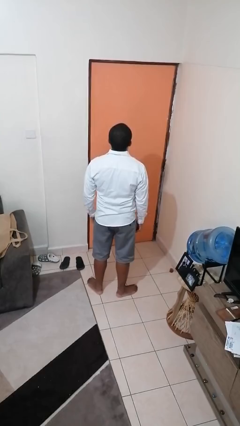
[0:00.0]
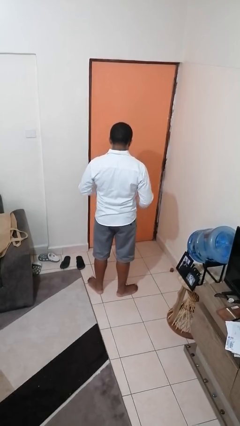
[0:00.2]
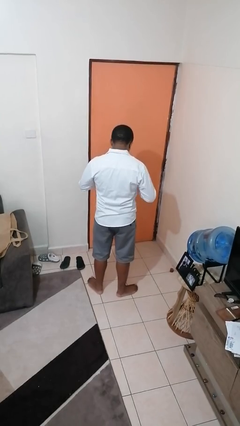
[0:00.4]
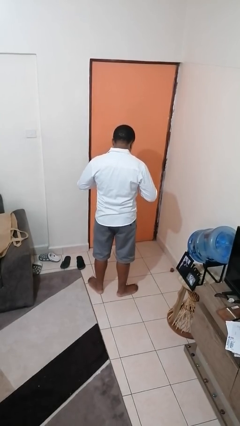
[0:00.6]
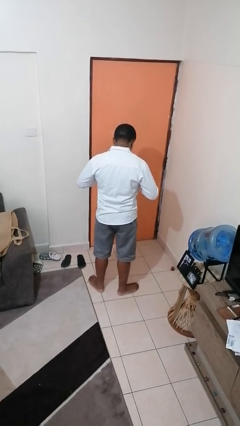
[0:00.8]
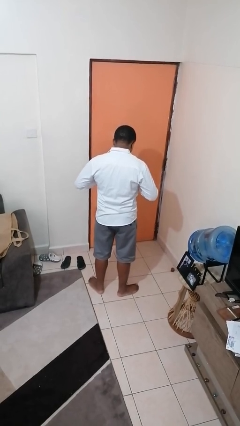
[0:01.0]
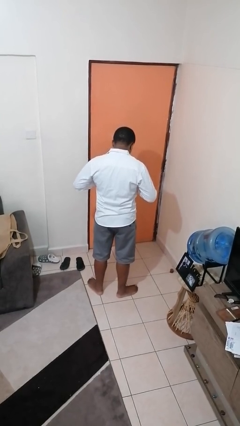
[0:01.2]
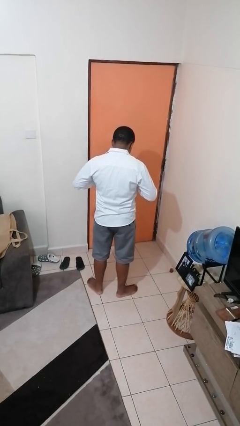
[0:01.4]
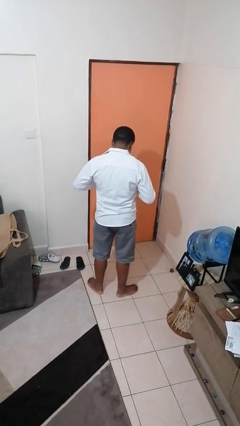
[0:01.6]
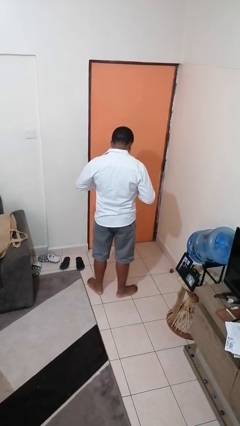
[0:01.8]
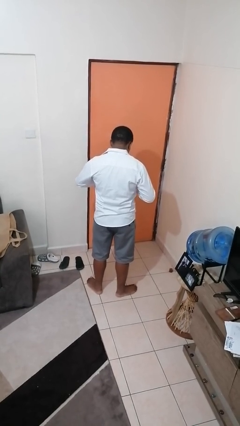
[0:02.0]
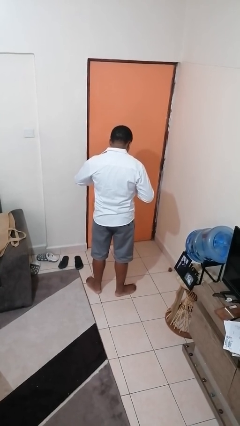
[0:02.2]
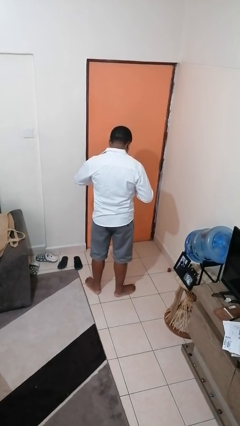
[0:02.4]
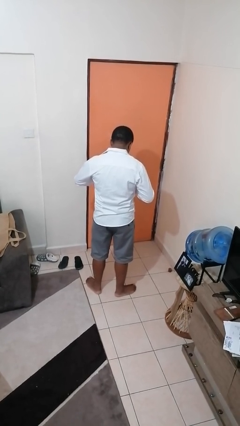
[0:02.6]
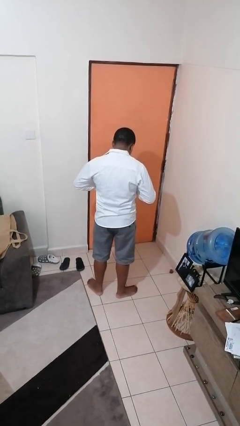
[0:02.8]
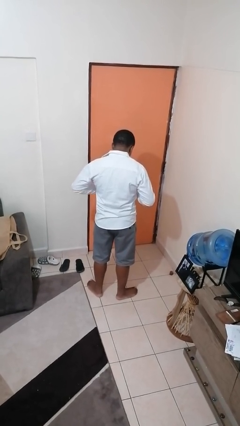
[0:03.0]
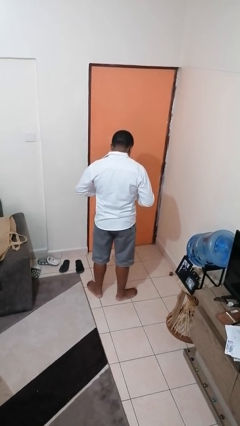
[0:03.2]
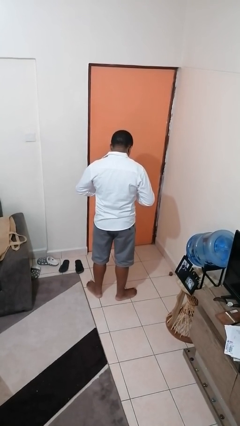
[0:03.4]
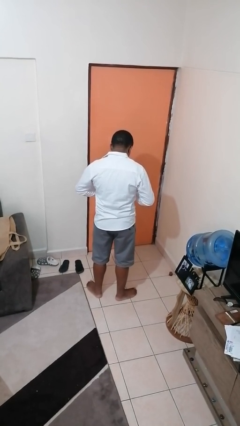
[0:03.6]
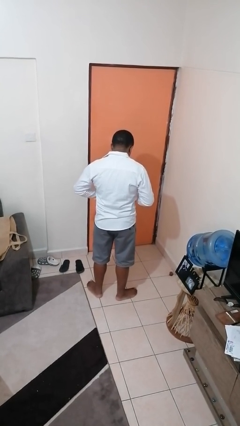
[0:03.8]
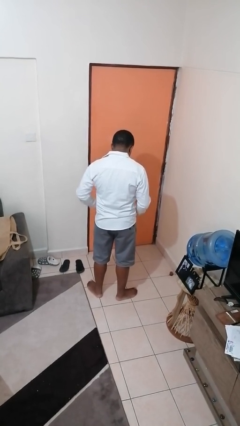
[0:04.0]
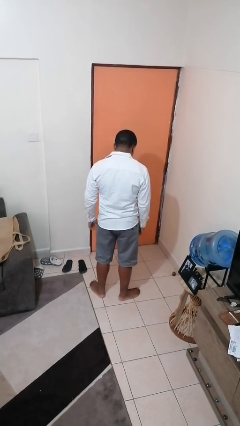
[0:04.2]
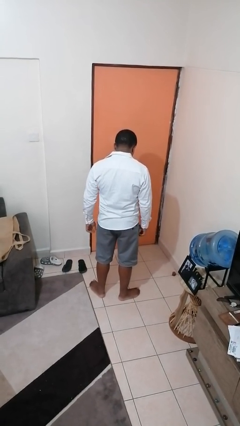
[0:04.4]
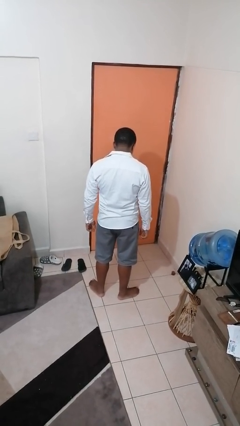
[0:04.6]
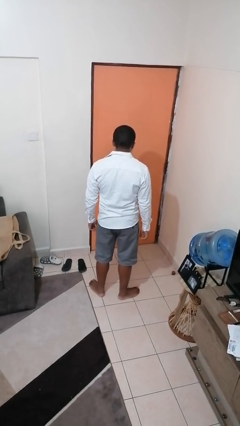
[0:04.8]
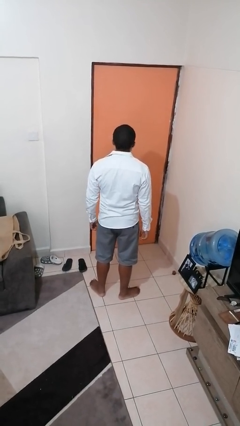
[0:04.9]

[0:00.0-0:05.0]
person unbuttons shirt

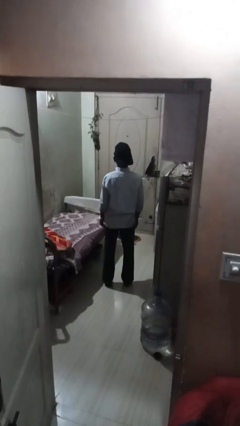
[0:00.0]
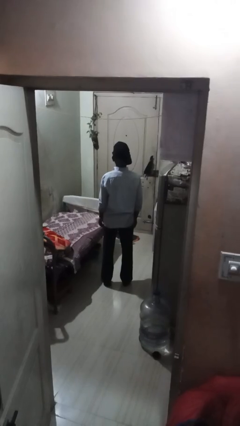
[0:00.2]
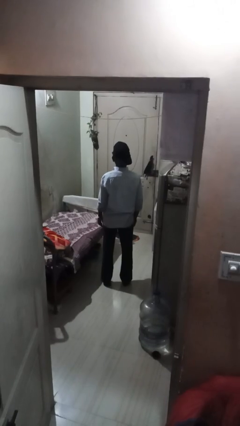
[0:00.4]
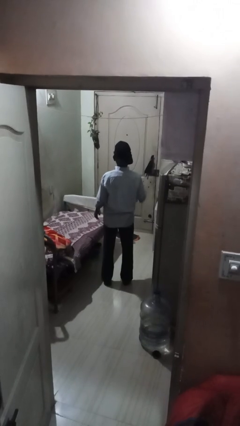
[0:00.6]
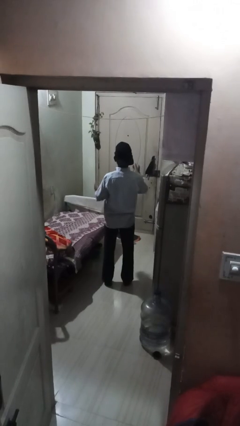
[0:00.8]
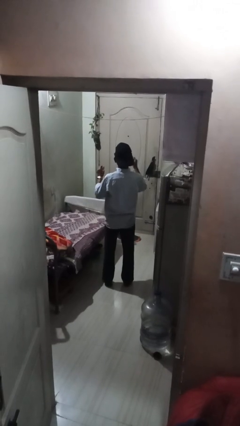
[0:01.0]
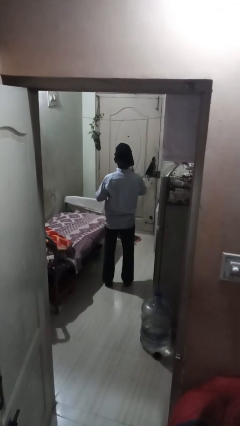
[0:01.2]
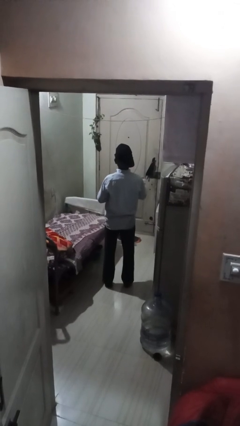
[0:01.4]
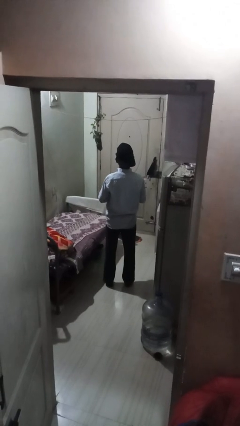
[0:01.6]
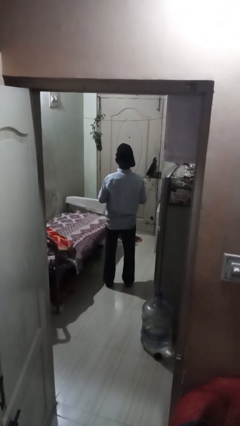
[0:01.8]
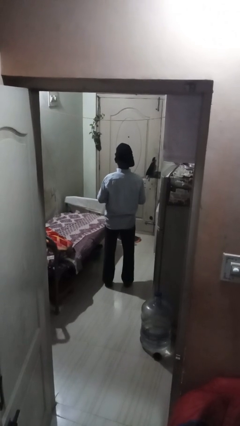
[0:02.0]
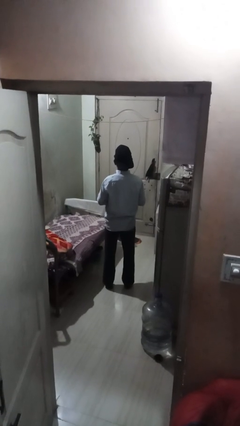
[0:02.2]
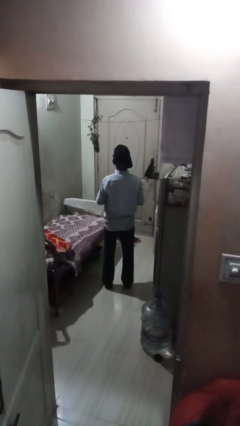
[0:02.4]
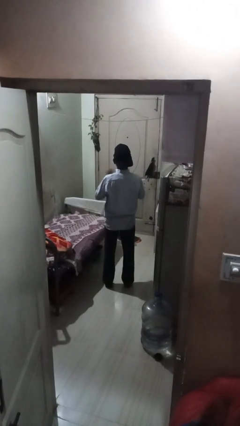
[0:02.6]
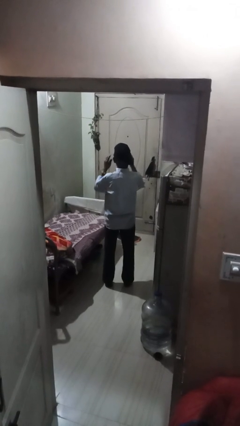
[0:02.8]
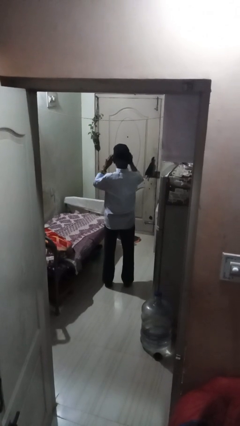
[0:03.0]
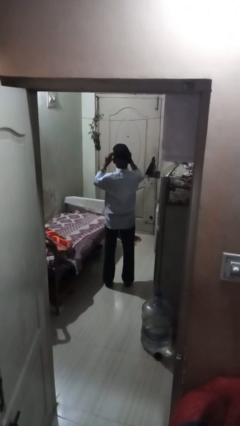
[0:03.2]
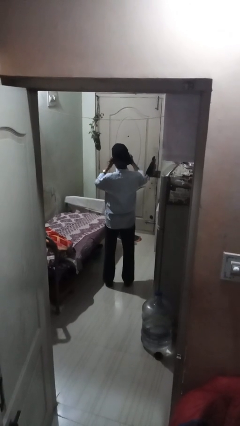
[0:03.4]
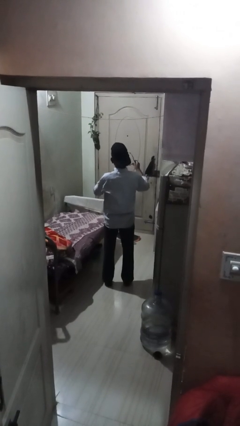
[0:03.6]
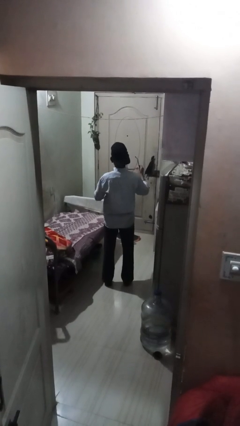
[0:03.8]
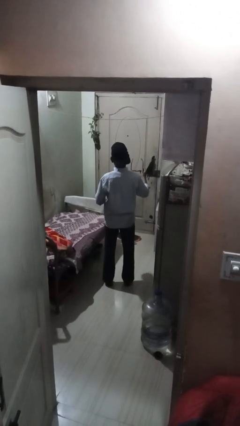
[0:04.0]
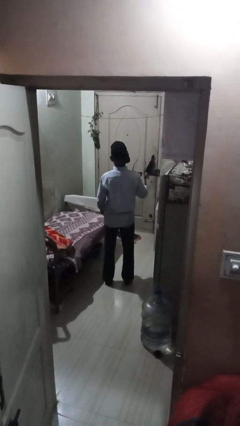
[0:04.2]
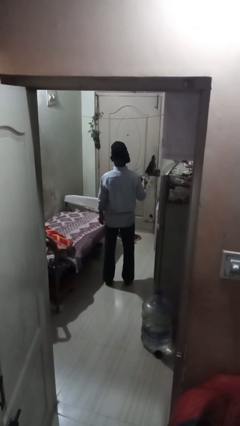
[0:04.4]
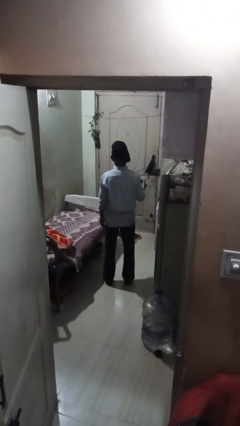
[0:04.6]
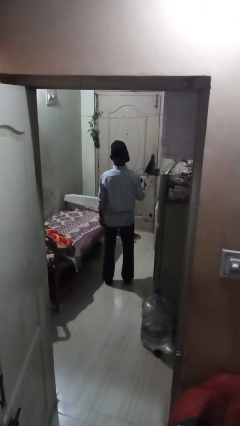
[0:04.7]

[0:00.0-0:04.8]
person takes off sunglasses

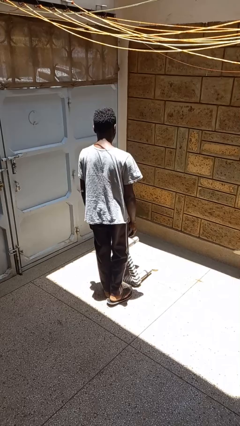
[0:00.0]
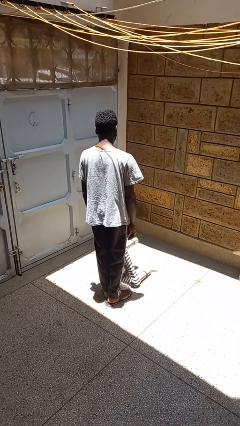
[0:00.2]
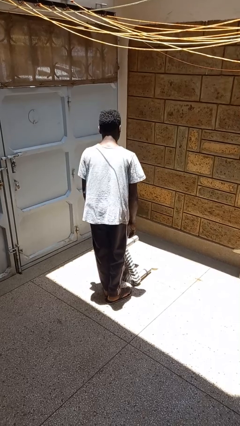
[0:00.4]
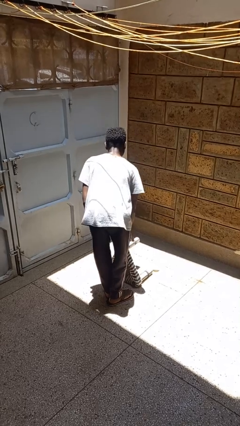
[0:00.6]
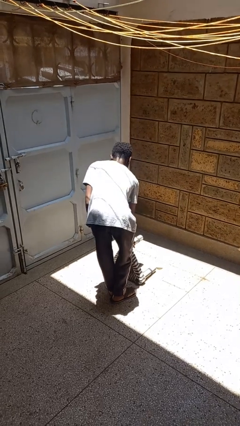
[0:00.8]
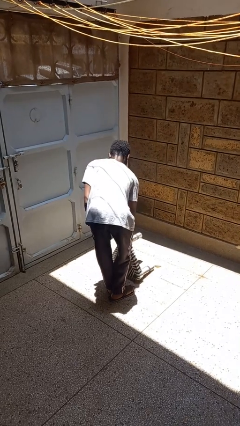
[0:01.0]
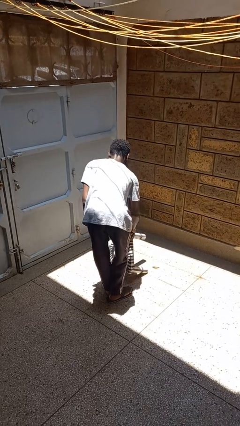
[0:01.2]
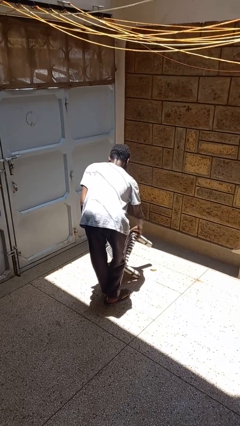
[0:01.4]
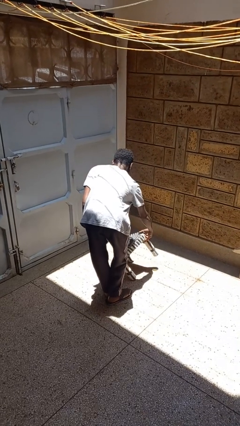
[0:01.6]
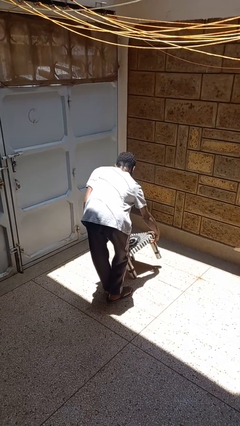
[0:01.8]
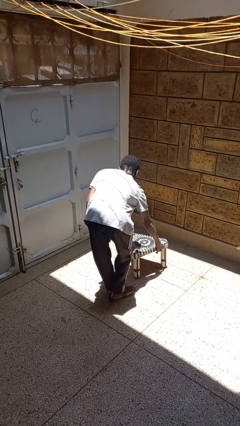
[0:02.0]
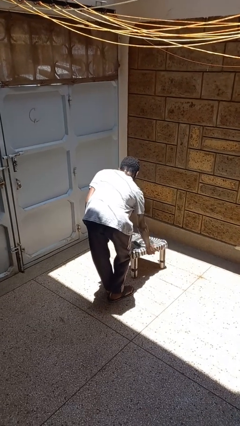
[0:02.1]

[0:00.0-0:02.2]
person sets upright furniture

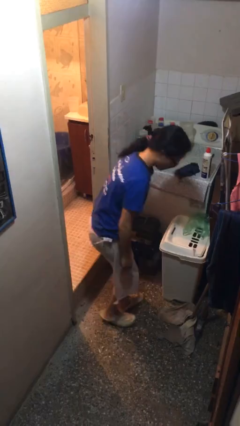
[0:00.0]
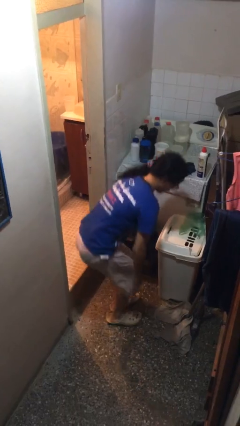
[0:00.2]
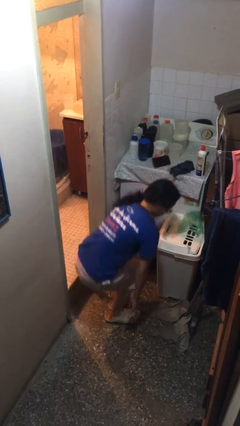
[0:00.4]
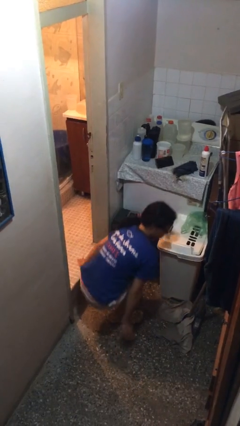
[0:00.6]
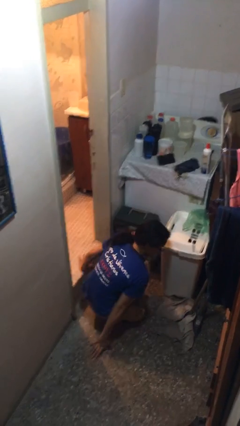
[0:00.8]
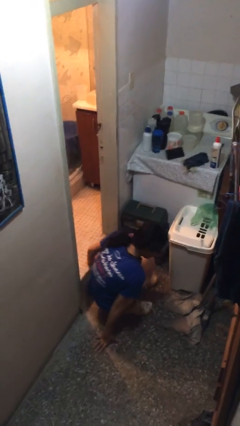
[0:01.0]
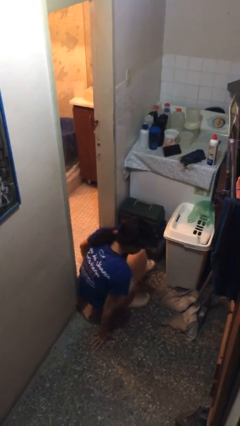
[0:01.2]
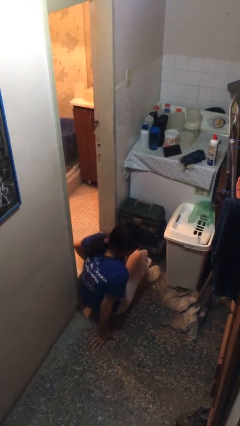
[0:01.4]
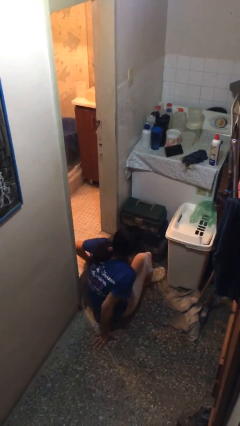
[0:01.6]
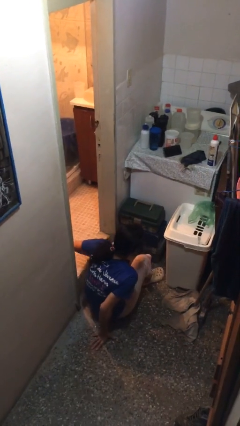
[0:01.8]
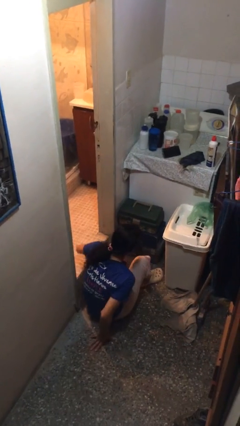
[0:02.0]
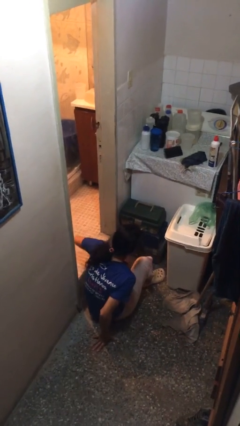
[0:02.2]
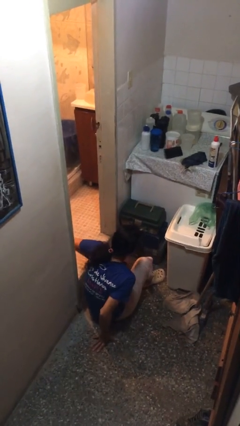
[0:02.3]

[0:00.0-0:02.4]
person sits down

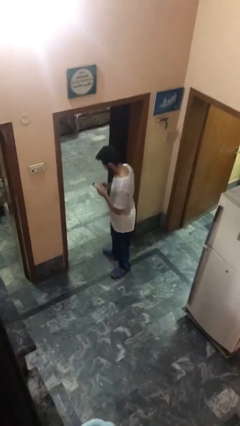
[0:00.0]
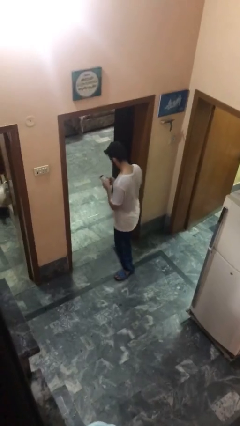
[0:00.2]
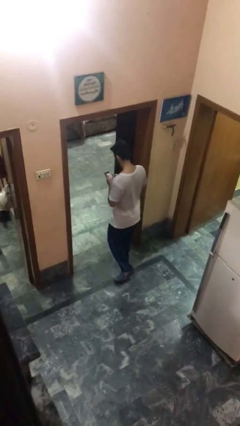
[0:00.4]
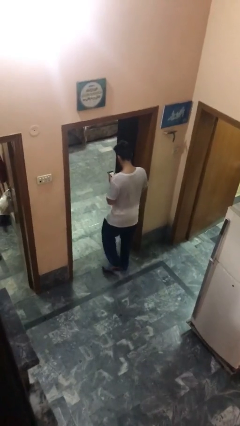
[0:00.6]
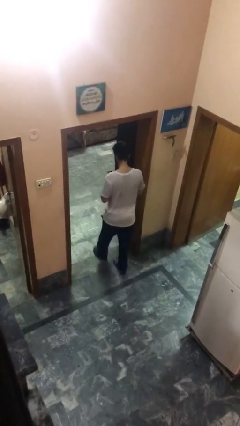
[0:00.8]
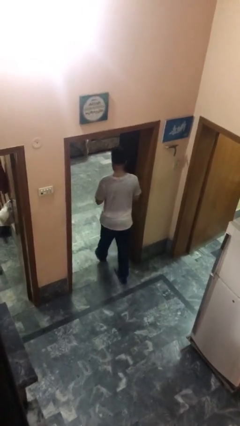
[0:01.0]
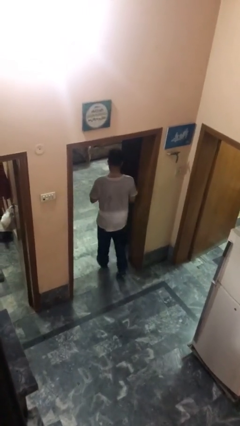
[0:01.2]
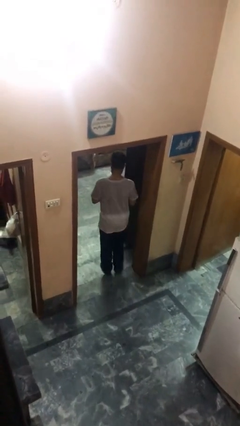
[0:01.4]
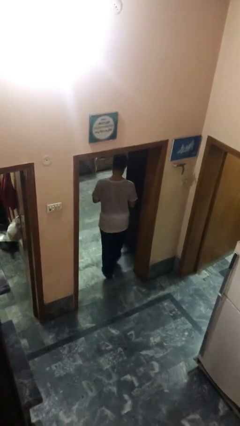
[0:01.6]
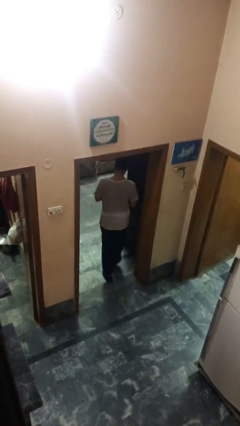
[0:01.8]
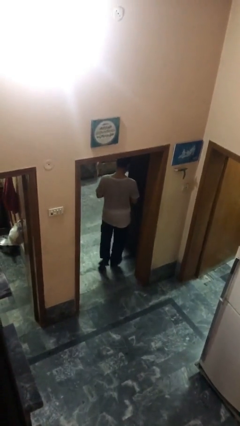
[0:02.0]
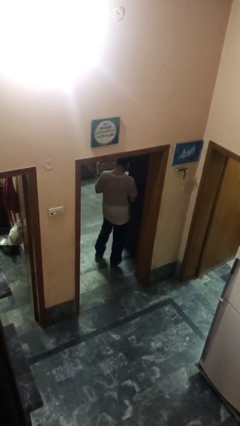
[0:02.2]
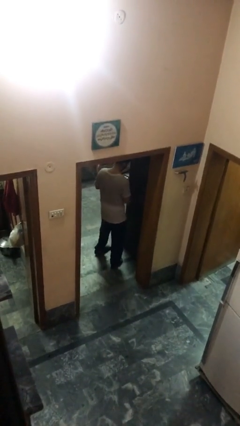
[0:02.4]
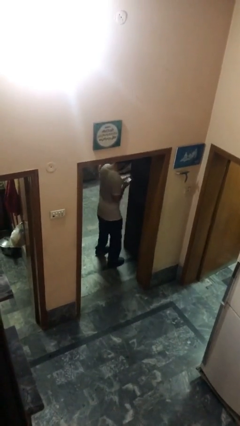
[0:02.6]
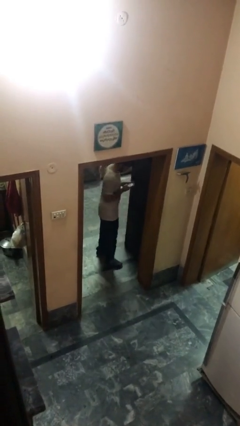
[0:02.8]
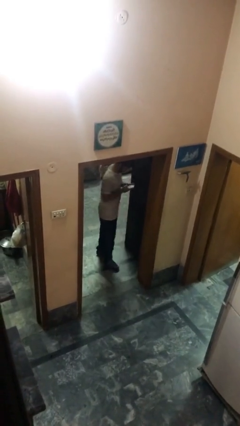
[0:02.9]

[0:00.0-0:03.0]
person exits scene through structure

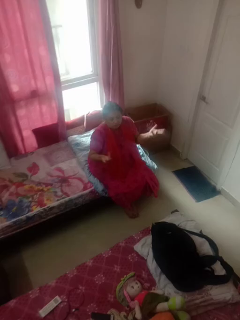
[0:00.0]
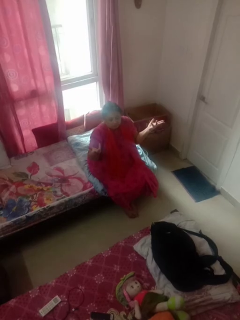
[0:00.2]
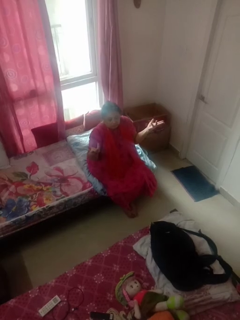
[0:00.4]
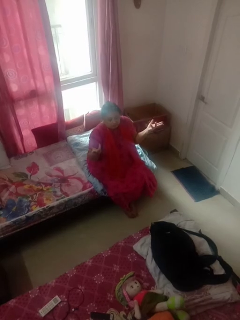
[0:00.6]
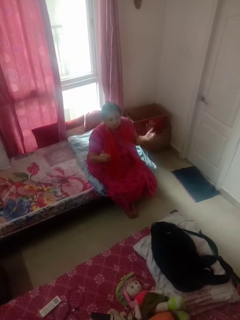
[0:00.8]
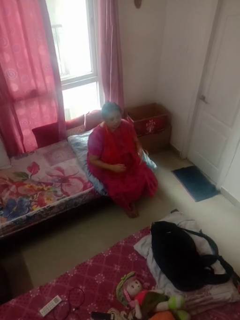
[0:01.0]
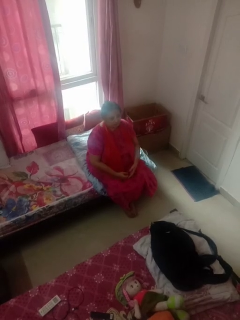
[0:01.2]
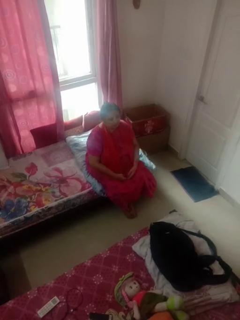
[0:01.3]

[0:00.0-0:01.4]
person shrugs
